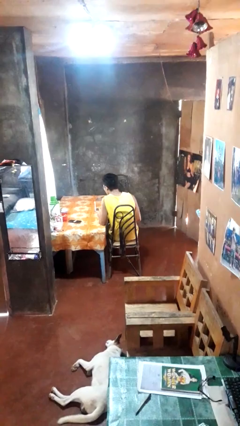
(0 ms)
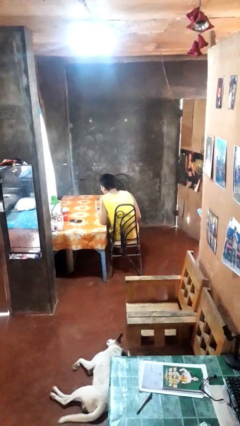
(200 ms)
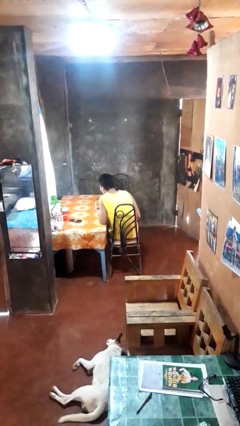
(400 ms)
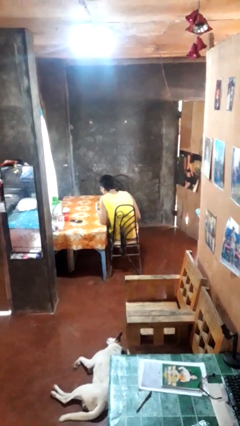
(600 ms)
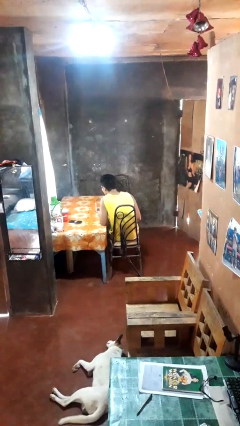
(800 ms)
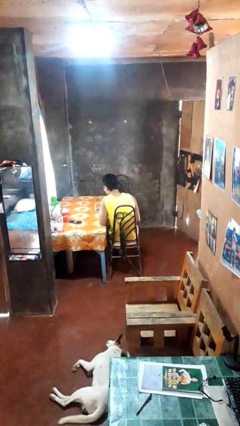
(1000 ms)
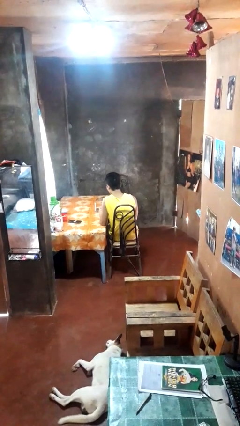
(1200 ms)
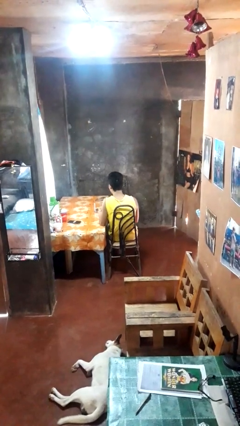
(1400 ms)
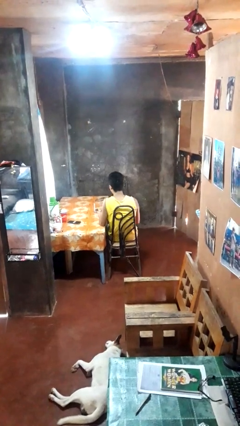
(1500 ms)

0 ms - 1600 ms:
person extinguishes candle

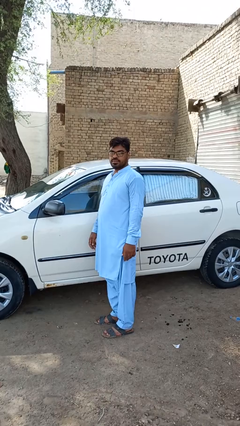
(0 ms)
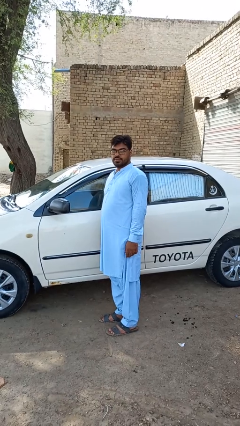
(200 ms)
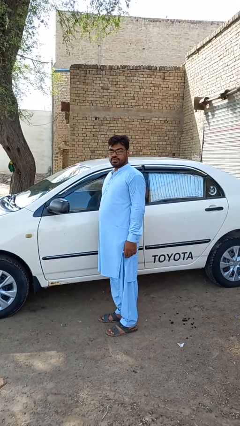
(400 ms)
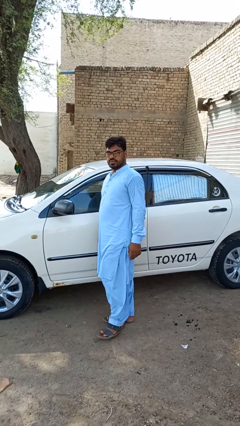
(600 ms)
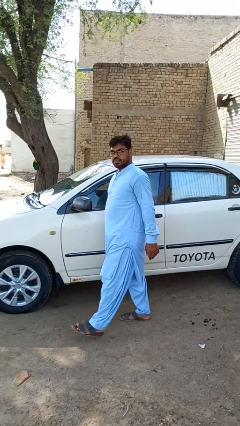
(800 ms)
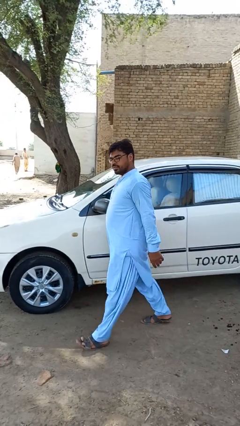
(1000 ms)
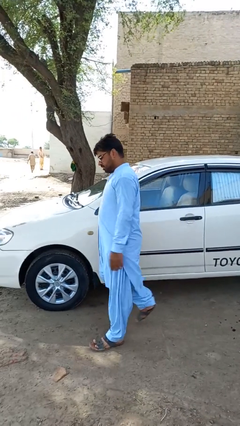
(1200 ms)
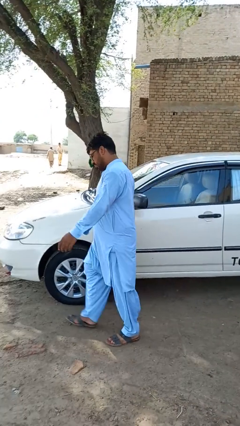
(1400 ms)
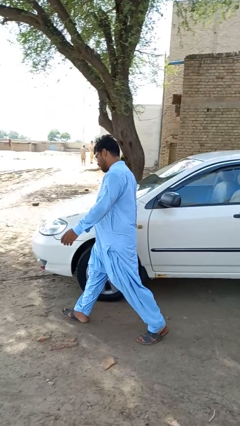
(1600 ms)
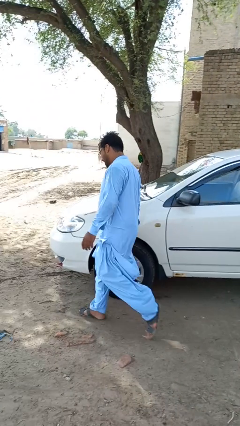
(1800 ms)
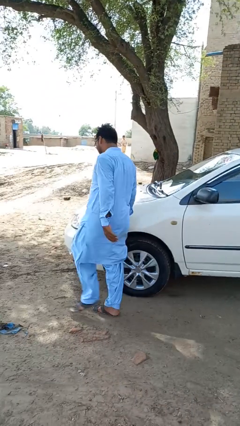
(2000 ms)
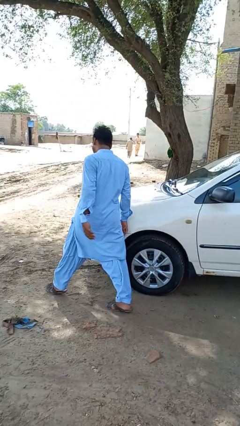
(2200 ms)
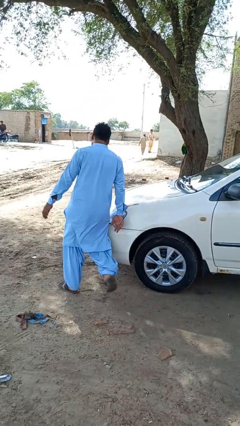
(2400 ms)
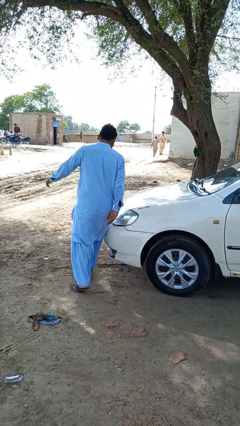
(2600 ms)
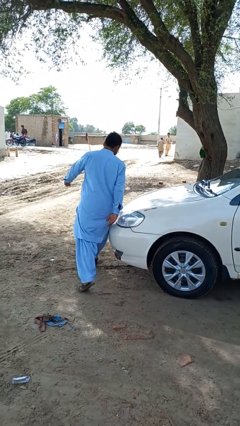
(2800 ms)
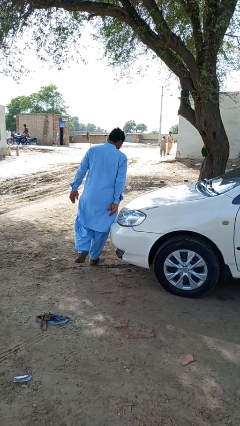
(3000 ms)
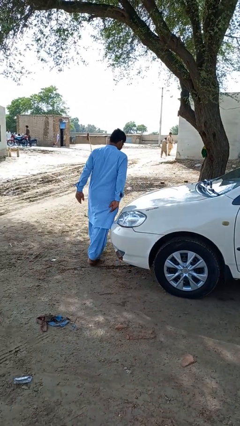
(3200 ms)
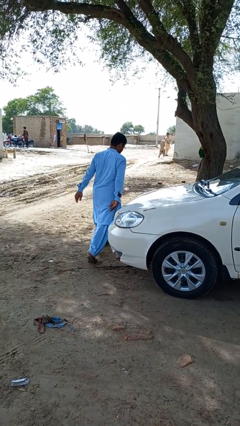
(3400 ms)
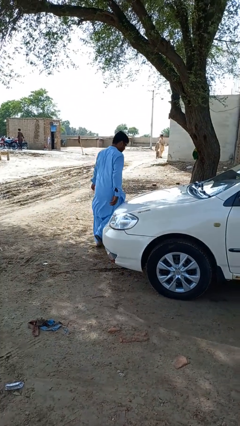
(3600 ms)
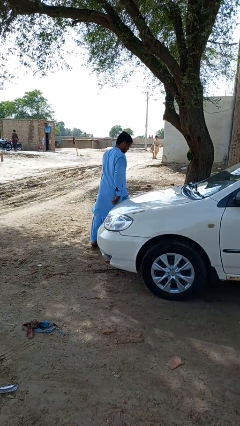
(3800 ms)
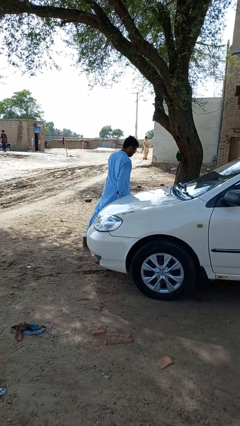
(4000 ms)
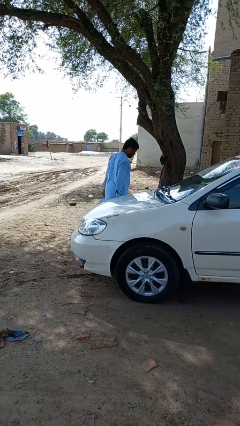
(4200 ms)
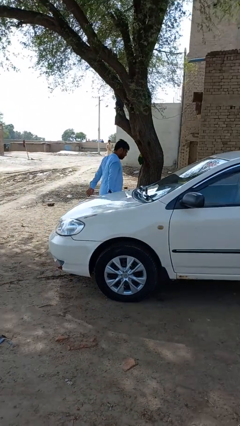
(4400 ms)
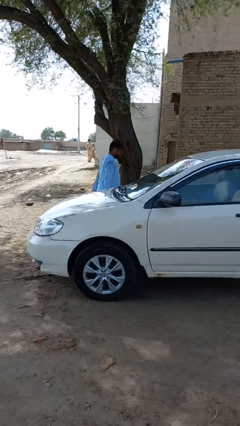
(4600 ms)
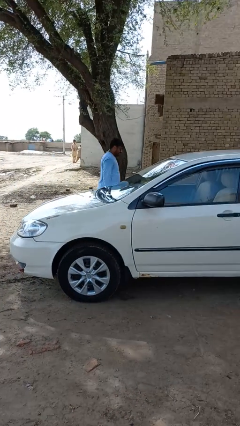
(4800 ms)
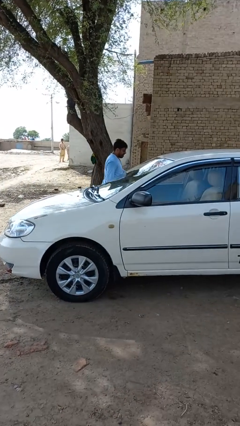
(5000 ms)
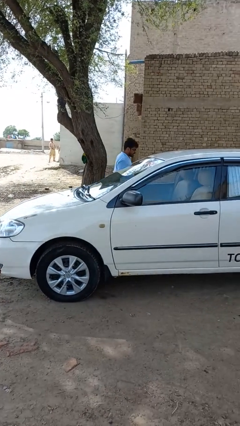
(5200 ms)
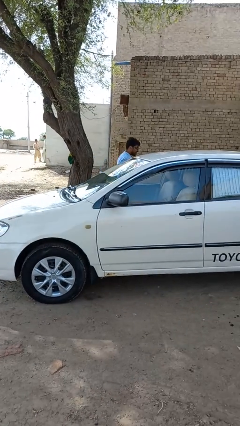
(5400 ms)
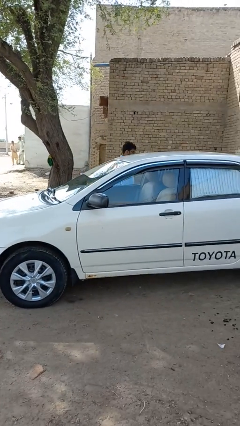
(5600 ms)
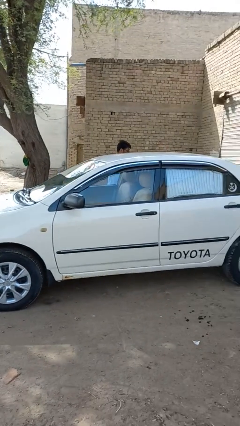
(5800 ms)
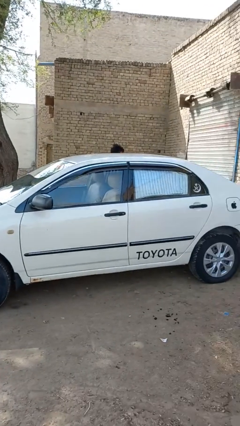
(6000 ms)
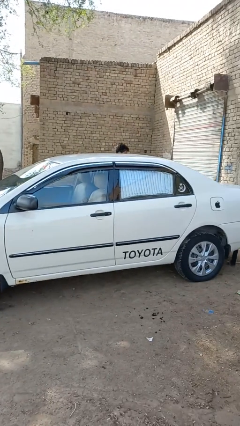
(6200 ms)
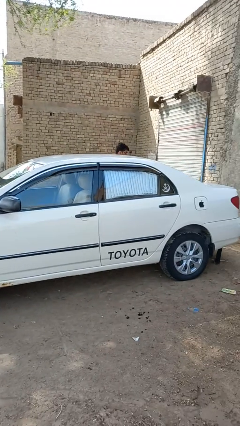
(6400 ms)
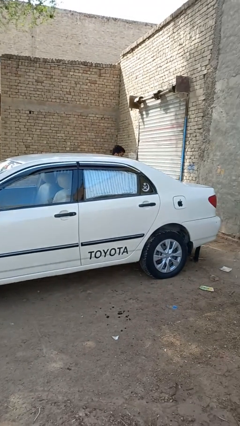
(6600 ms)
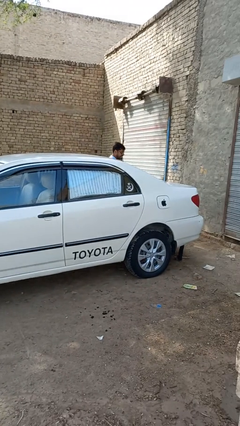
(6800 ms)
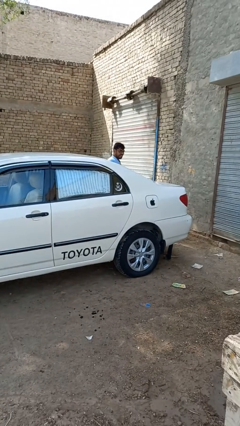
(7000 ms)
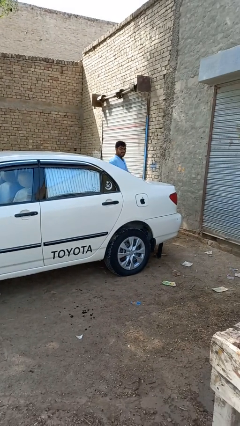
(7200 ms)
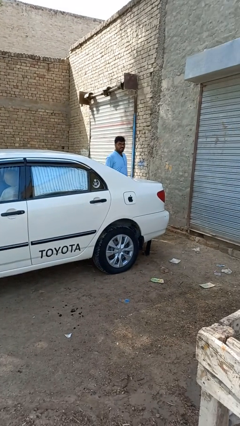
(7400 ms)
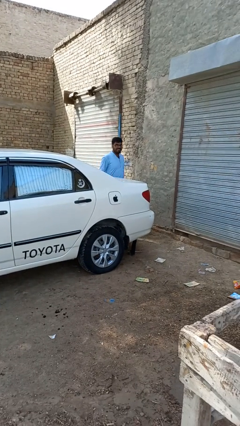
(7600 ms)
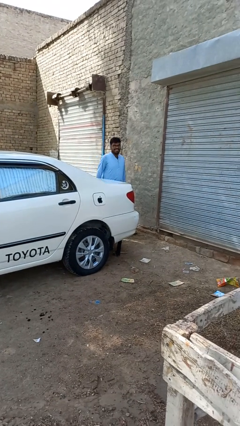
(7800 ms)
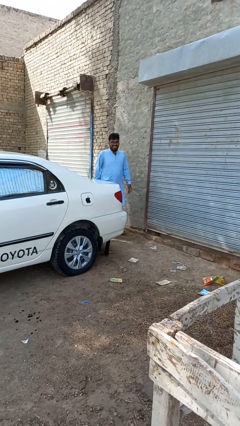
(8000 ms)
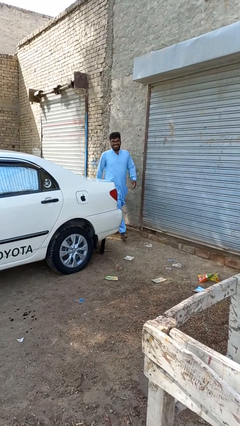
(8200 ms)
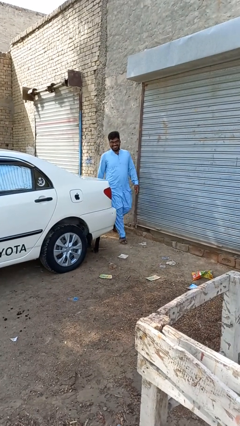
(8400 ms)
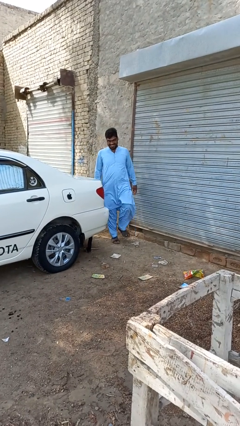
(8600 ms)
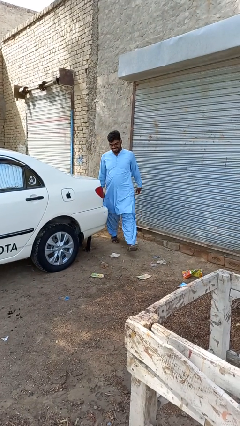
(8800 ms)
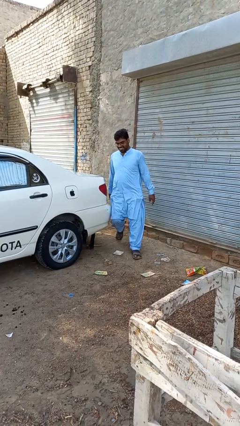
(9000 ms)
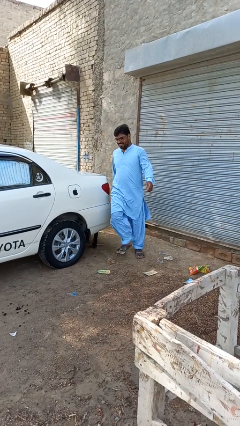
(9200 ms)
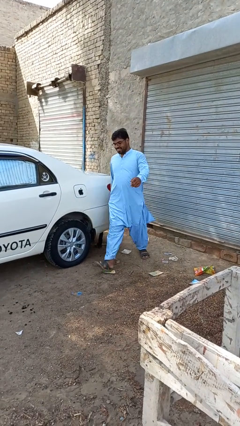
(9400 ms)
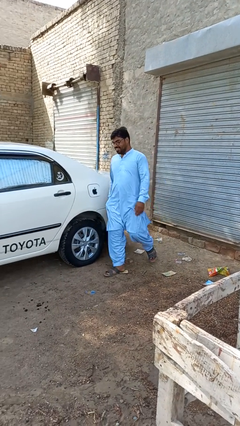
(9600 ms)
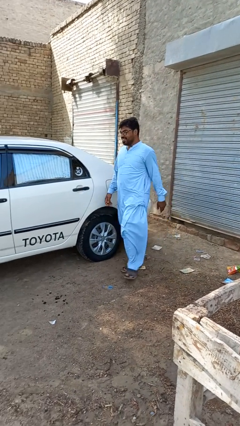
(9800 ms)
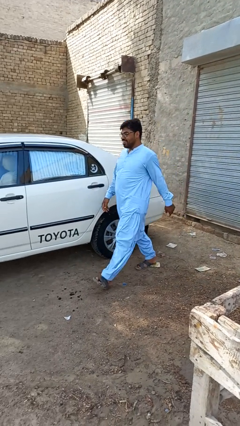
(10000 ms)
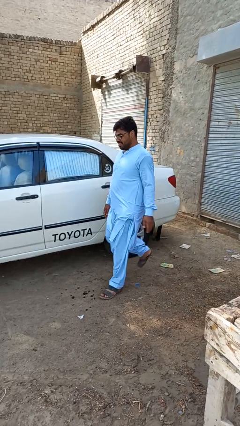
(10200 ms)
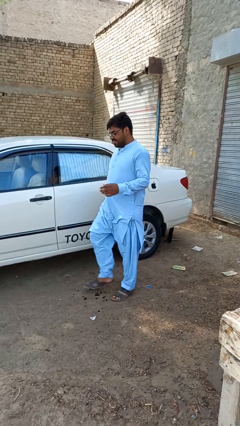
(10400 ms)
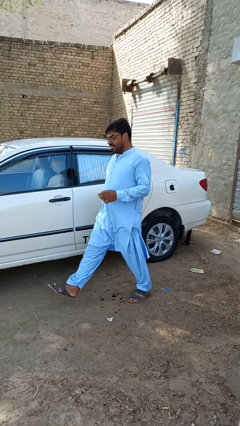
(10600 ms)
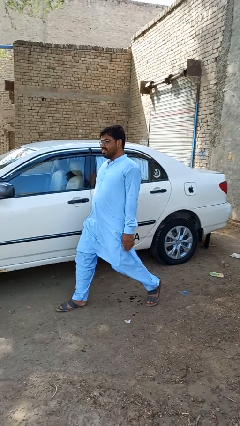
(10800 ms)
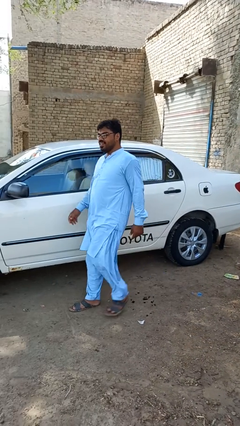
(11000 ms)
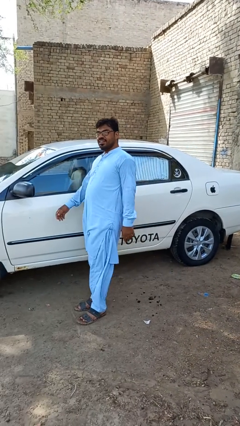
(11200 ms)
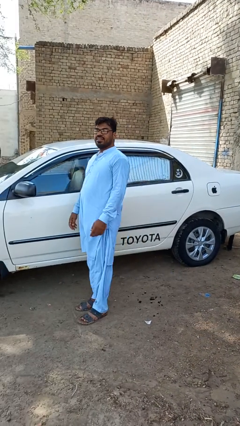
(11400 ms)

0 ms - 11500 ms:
person walks around car

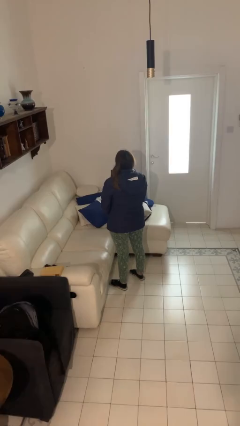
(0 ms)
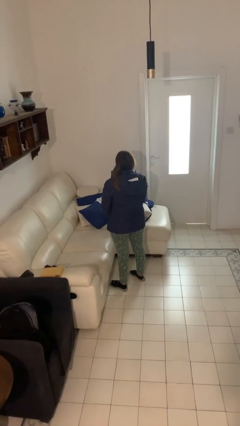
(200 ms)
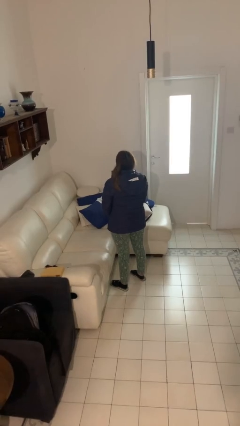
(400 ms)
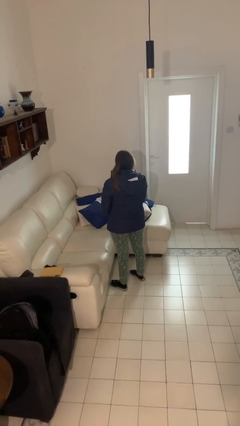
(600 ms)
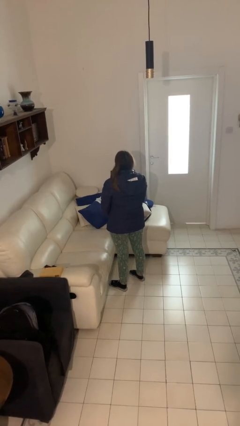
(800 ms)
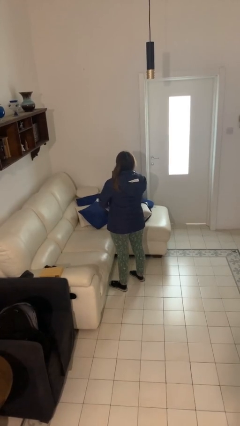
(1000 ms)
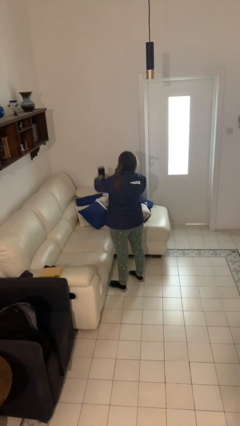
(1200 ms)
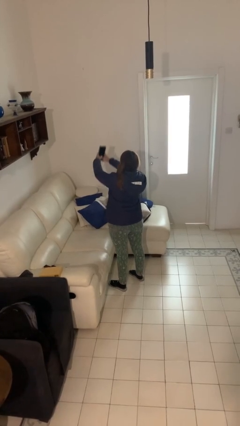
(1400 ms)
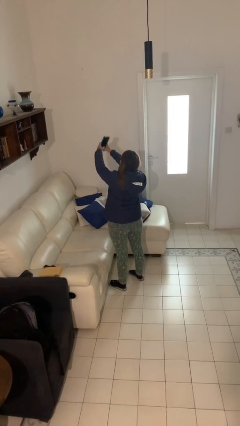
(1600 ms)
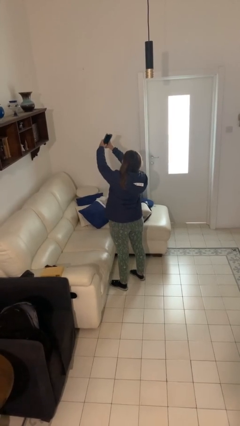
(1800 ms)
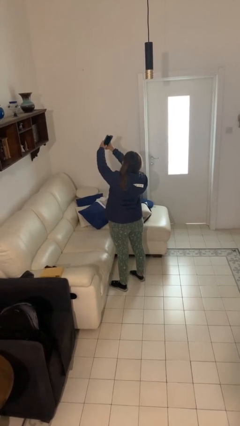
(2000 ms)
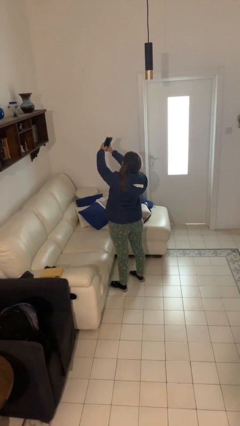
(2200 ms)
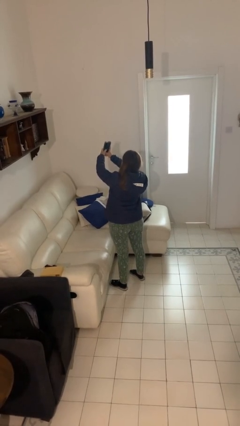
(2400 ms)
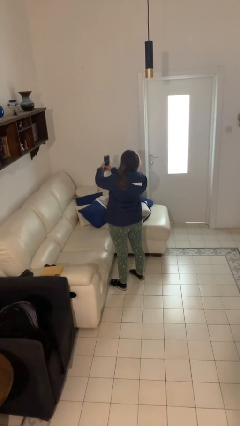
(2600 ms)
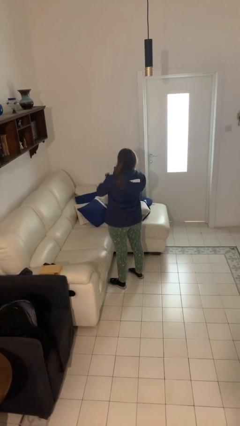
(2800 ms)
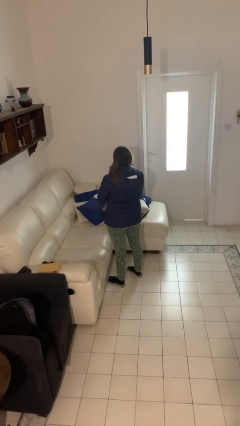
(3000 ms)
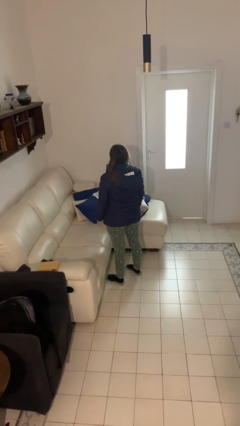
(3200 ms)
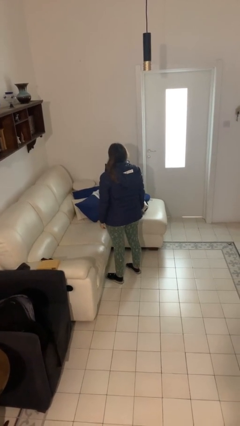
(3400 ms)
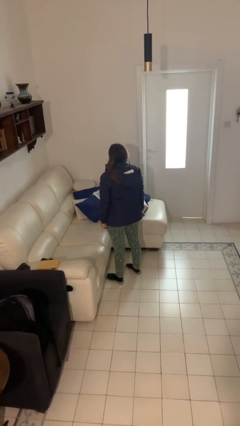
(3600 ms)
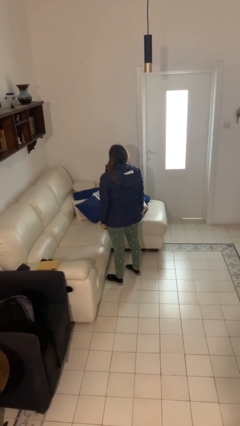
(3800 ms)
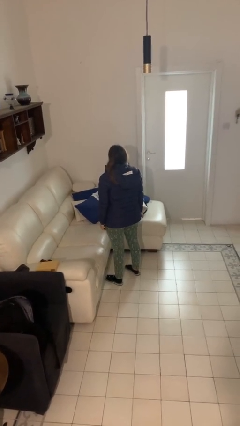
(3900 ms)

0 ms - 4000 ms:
person takes selfie

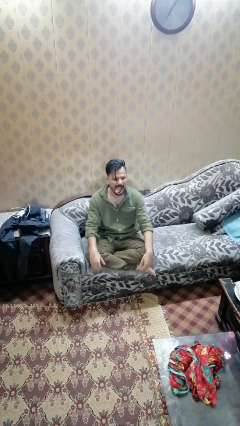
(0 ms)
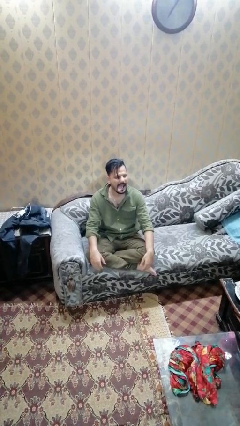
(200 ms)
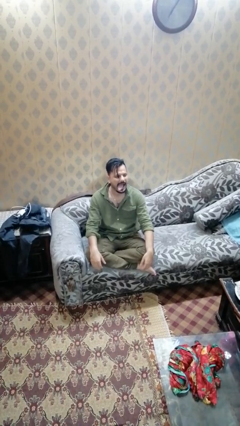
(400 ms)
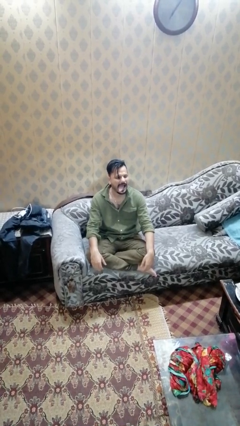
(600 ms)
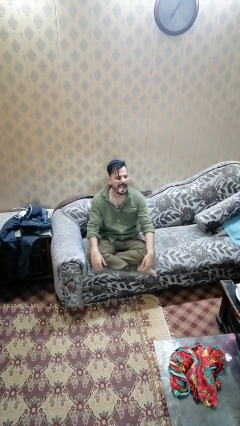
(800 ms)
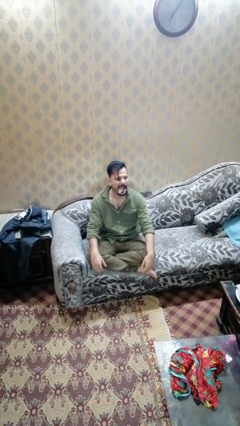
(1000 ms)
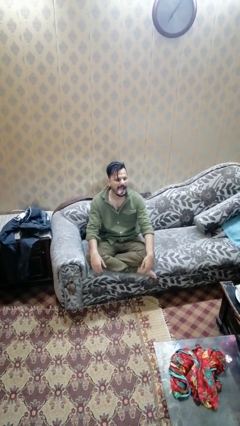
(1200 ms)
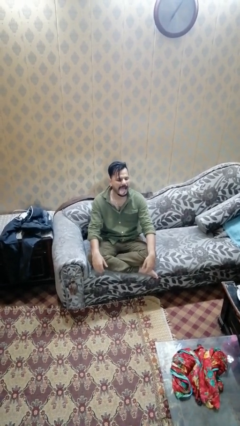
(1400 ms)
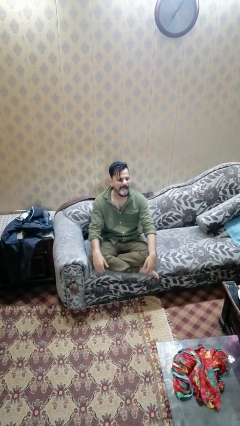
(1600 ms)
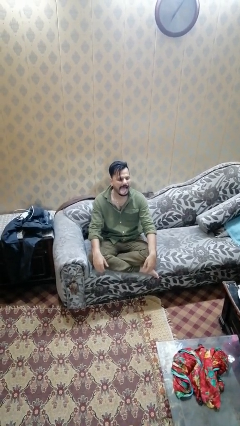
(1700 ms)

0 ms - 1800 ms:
person sticks out tongue
